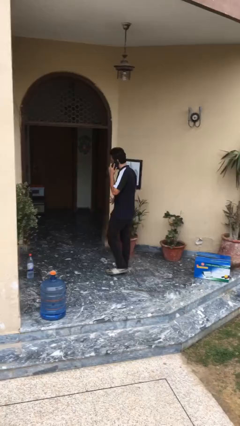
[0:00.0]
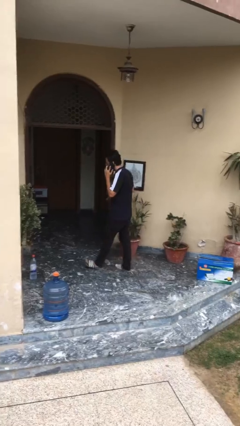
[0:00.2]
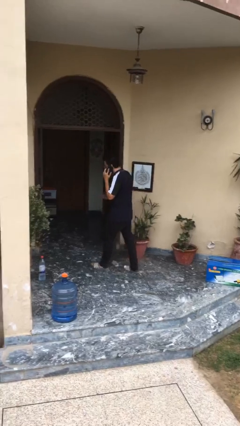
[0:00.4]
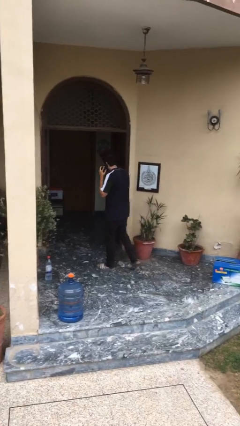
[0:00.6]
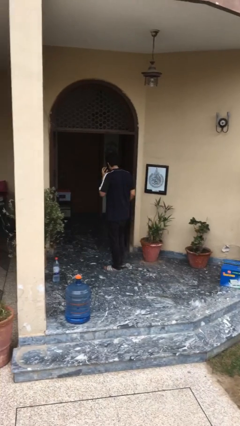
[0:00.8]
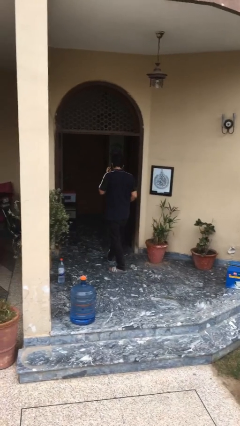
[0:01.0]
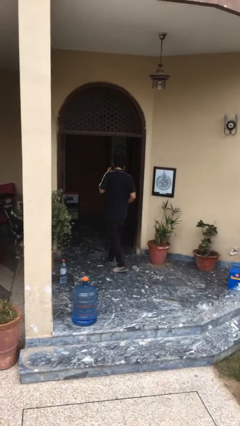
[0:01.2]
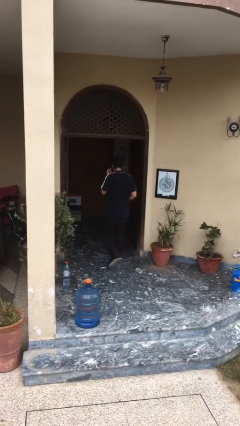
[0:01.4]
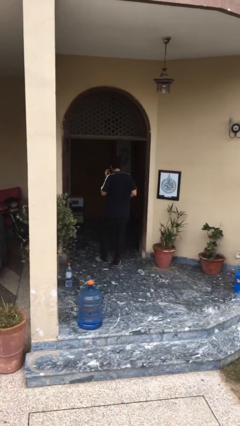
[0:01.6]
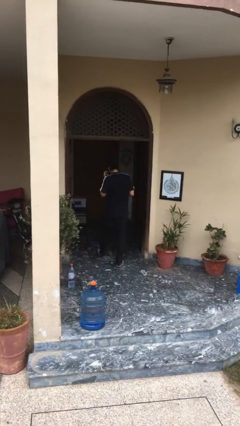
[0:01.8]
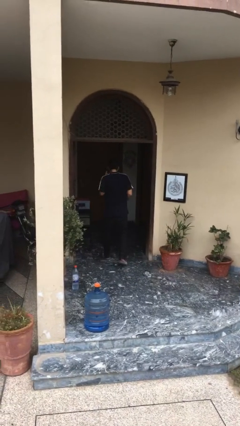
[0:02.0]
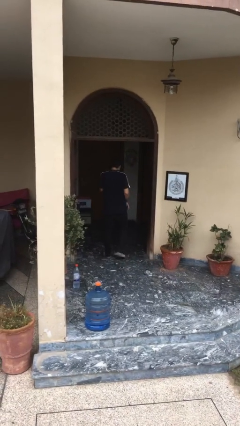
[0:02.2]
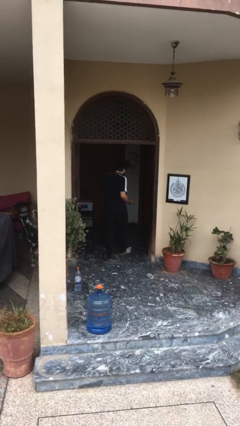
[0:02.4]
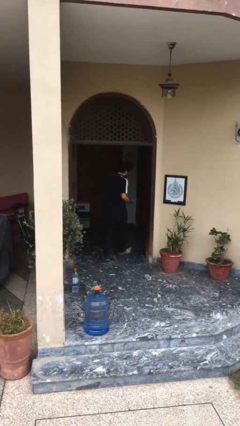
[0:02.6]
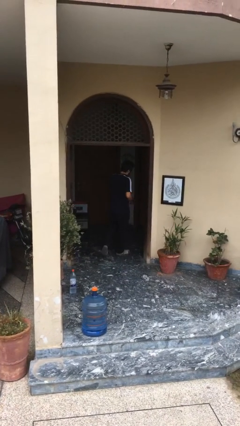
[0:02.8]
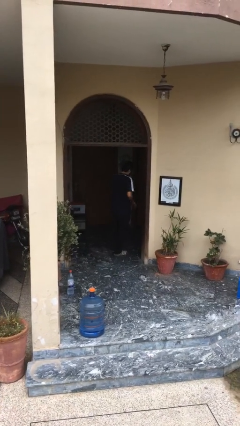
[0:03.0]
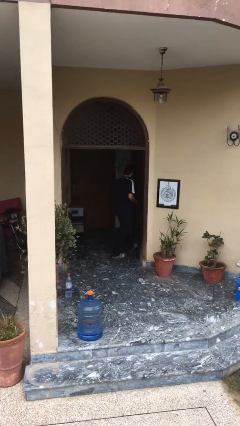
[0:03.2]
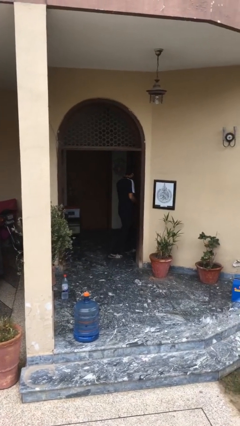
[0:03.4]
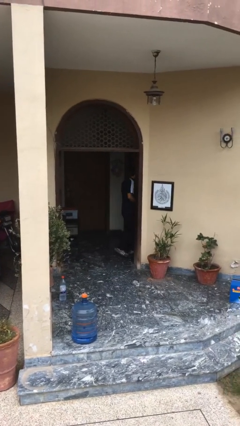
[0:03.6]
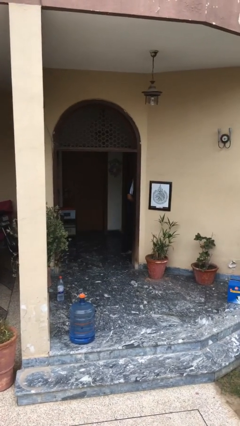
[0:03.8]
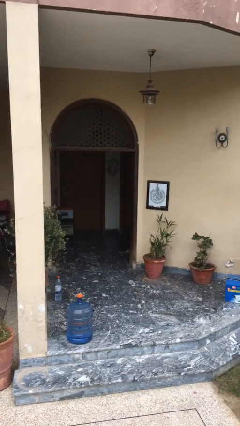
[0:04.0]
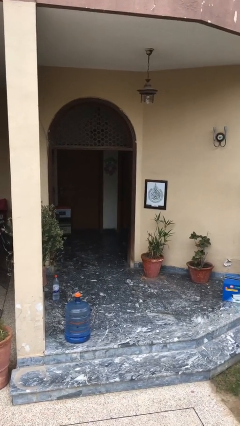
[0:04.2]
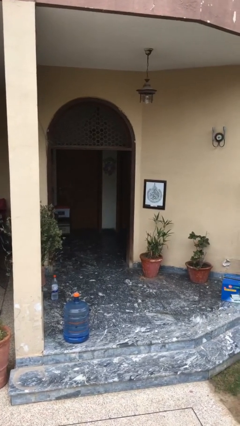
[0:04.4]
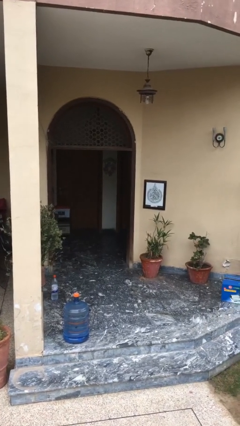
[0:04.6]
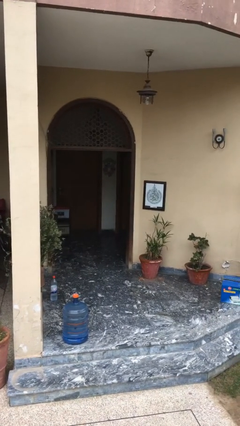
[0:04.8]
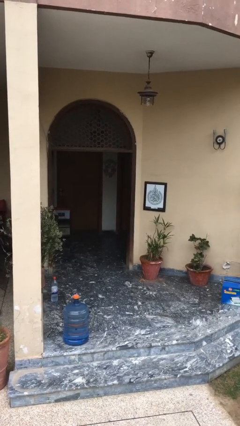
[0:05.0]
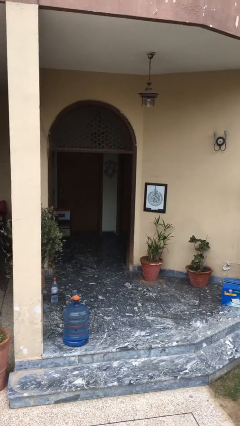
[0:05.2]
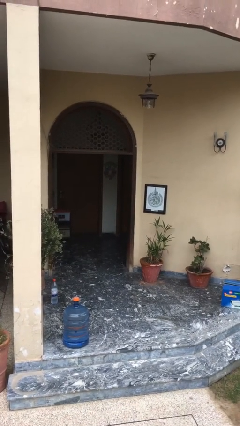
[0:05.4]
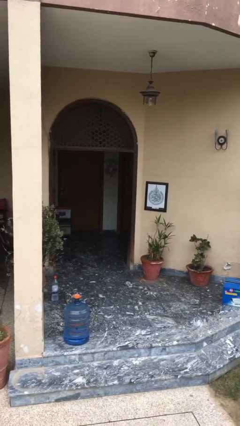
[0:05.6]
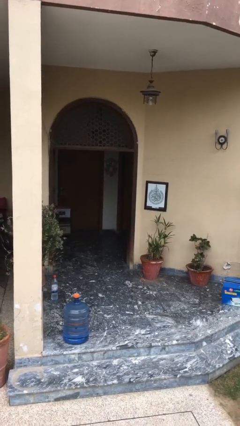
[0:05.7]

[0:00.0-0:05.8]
person exits scene through structure

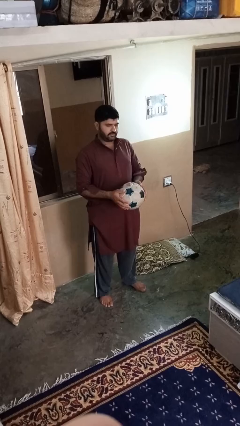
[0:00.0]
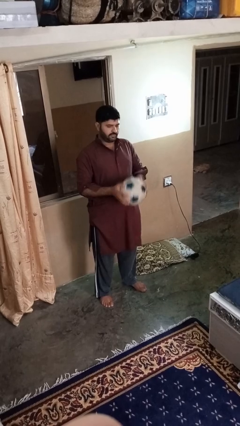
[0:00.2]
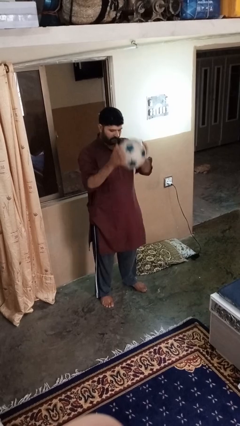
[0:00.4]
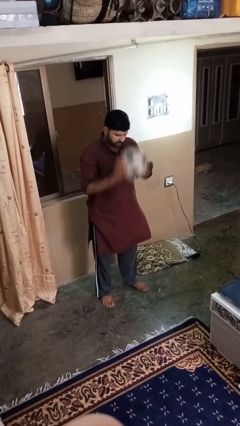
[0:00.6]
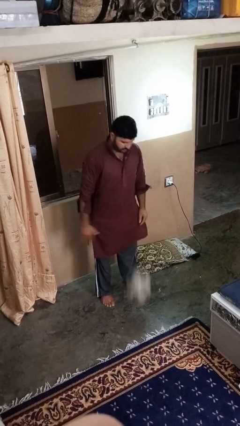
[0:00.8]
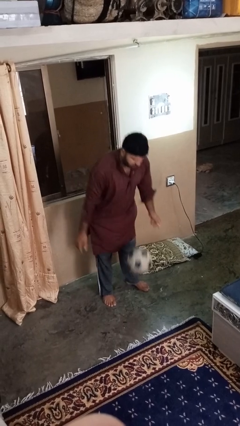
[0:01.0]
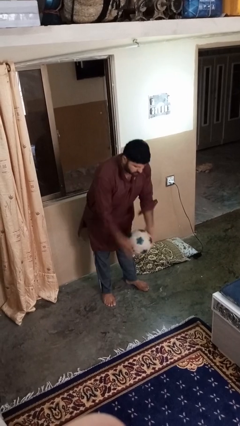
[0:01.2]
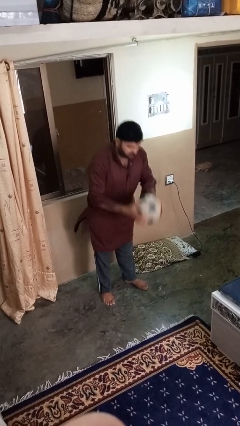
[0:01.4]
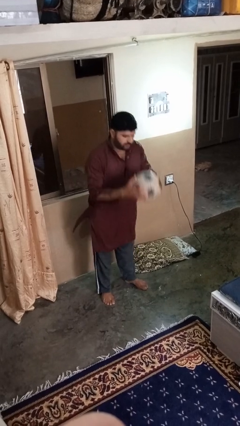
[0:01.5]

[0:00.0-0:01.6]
person bounces ball on floor

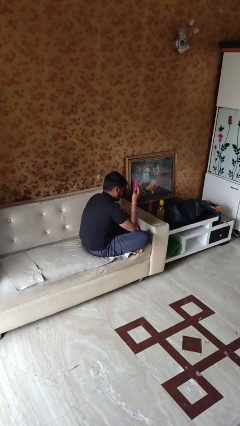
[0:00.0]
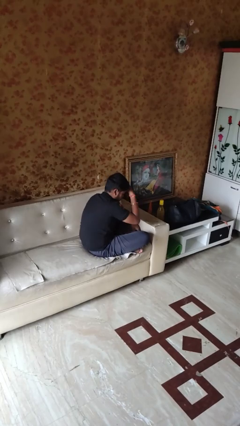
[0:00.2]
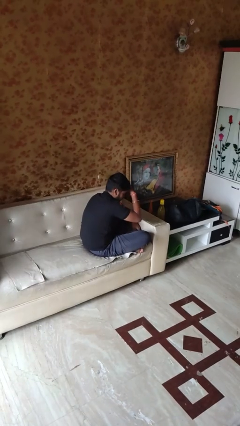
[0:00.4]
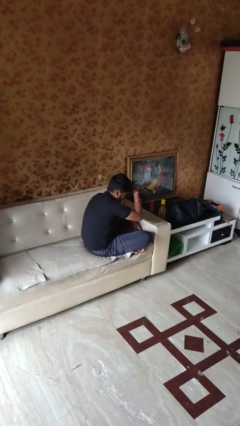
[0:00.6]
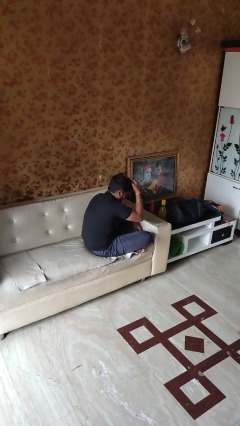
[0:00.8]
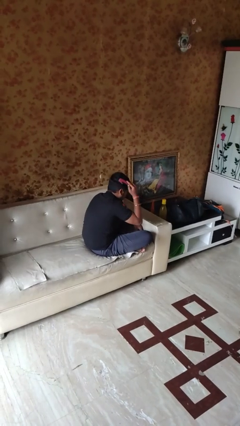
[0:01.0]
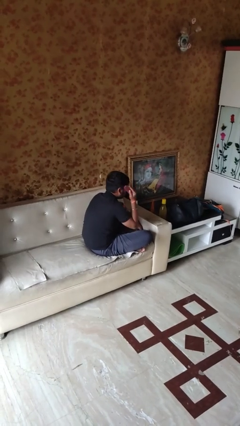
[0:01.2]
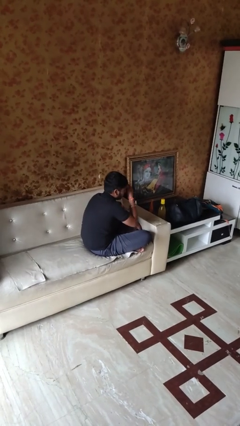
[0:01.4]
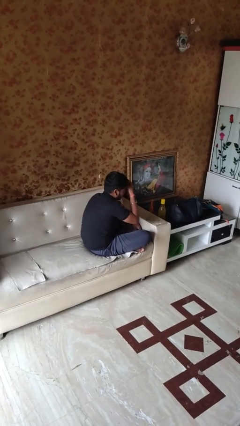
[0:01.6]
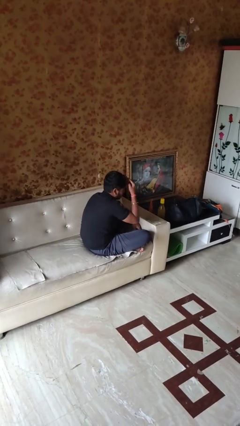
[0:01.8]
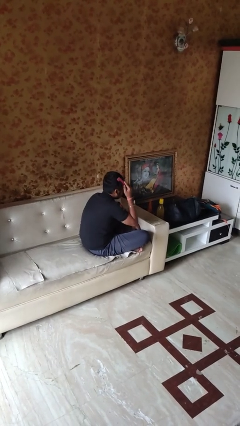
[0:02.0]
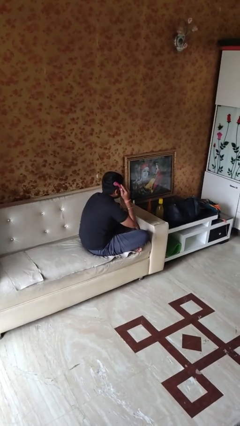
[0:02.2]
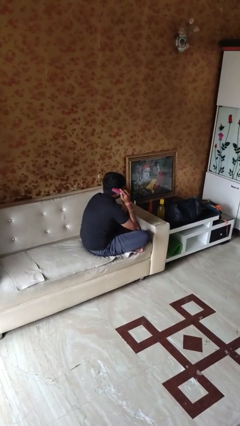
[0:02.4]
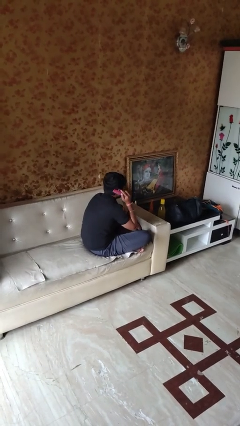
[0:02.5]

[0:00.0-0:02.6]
person brushes hair

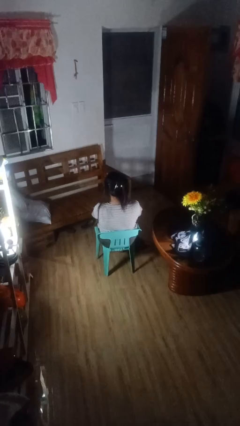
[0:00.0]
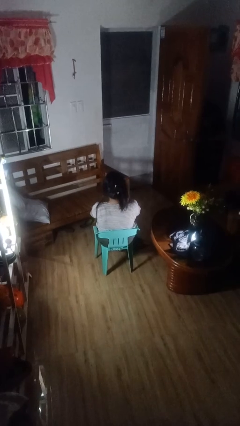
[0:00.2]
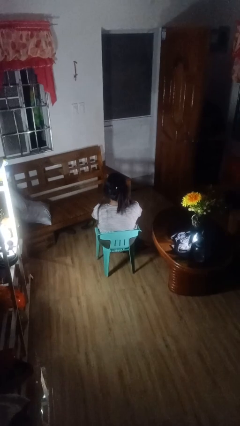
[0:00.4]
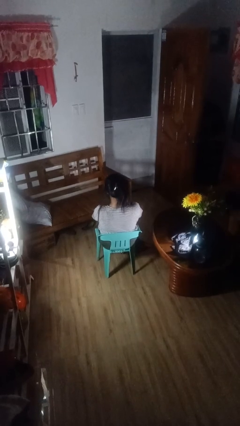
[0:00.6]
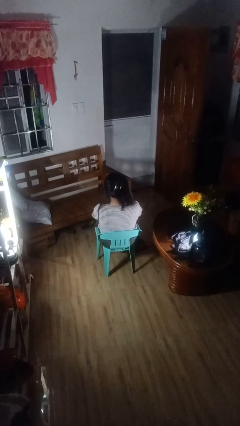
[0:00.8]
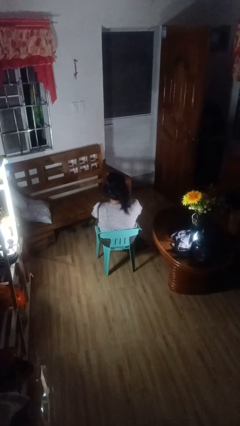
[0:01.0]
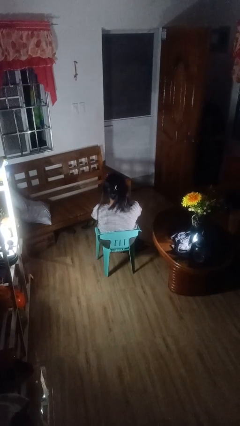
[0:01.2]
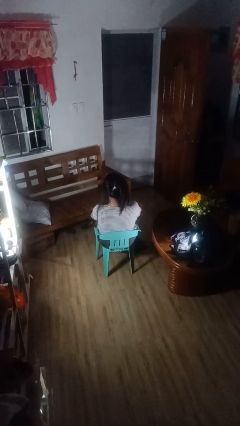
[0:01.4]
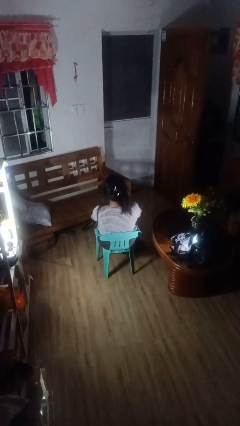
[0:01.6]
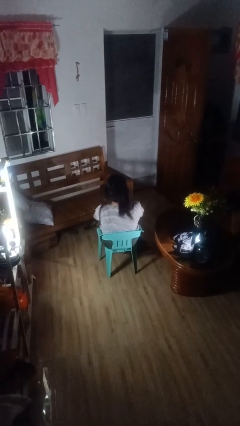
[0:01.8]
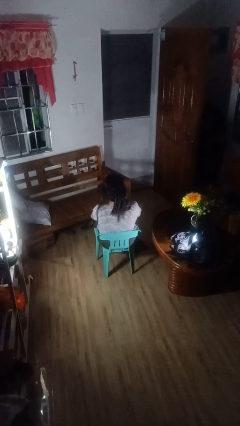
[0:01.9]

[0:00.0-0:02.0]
person nods head

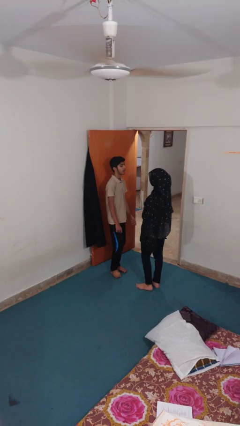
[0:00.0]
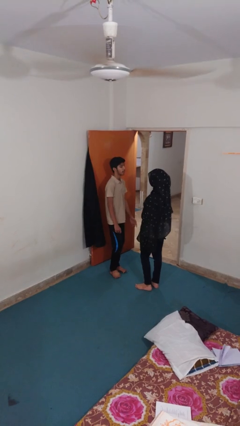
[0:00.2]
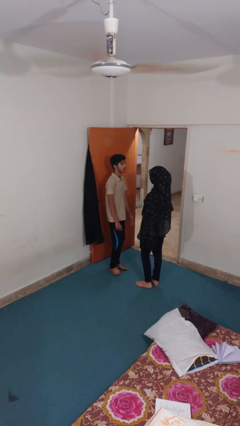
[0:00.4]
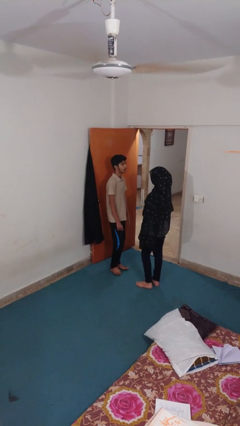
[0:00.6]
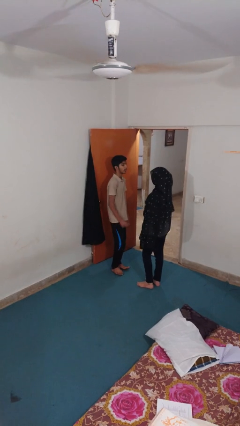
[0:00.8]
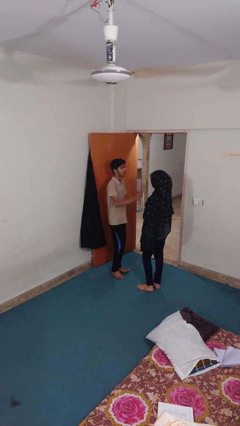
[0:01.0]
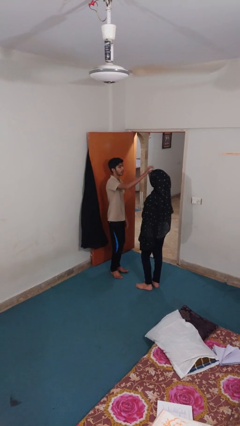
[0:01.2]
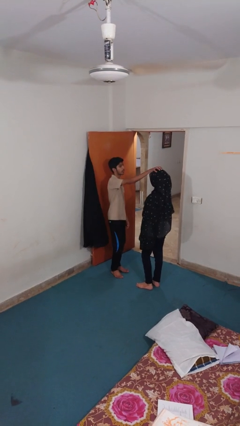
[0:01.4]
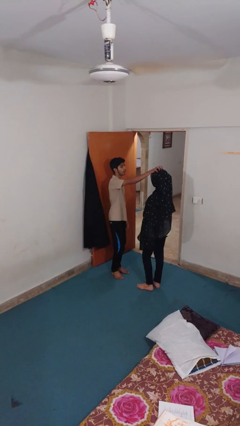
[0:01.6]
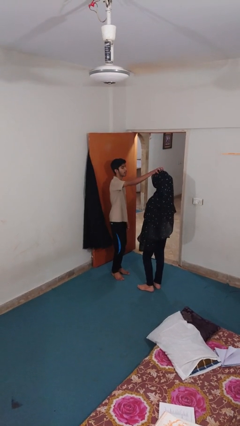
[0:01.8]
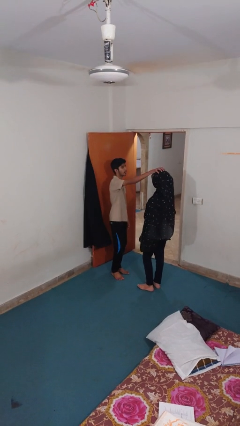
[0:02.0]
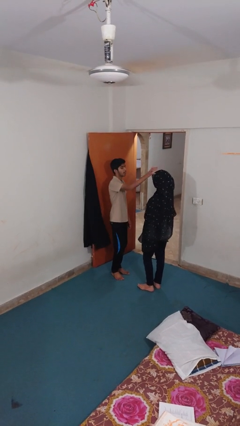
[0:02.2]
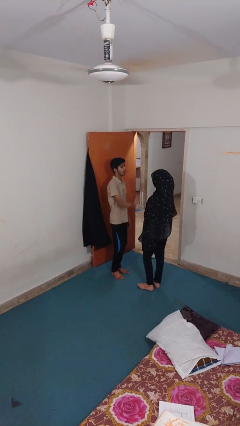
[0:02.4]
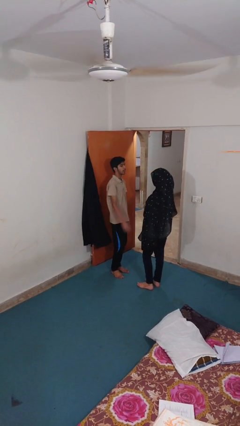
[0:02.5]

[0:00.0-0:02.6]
person grabs person by hair

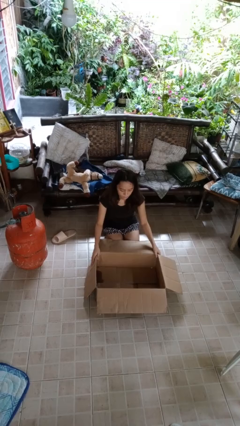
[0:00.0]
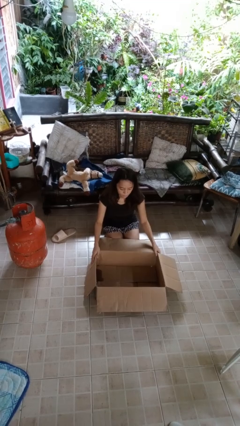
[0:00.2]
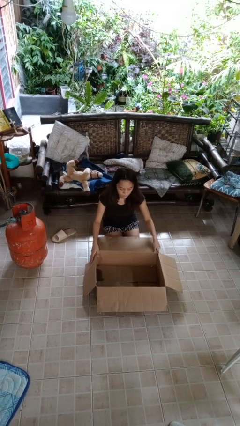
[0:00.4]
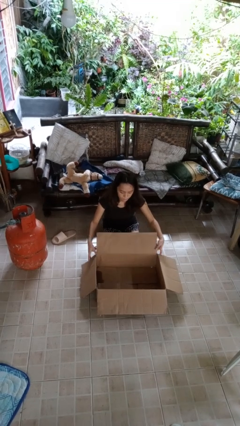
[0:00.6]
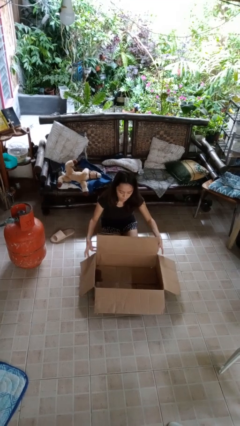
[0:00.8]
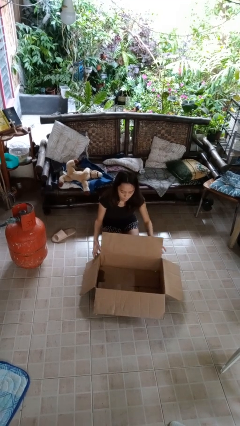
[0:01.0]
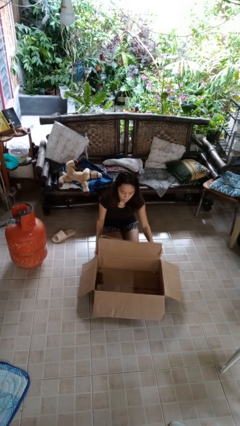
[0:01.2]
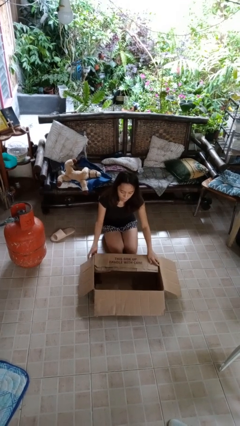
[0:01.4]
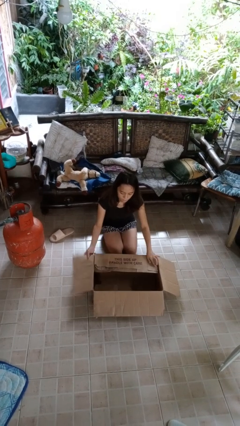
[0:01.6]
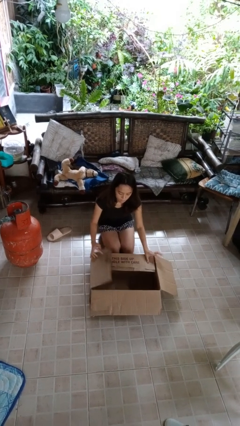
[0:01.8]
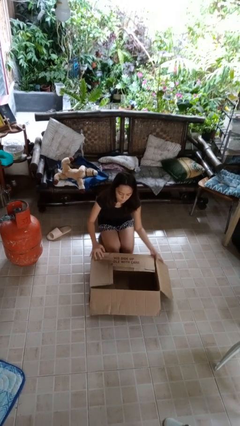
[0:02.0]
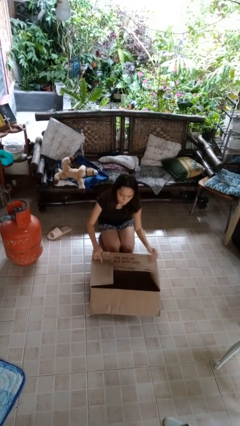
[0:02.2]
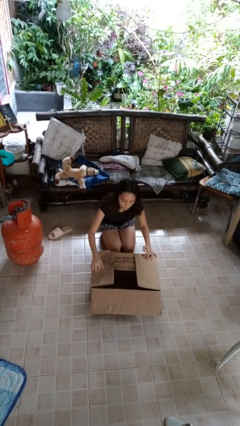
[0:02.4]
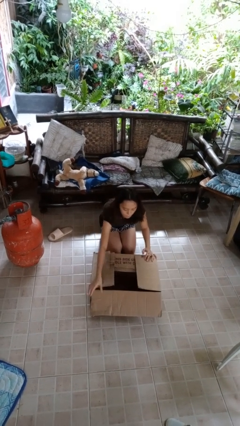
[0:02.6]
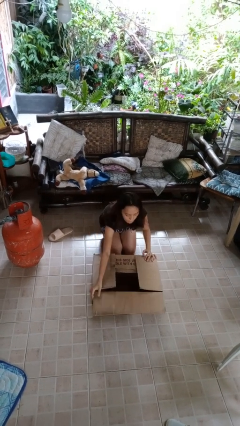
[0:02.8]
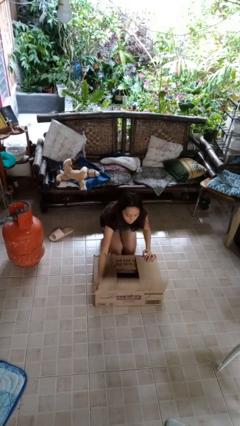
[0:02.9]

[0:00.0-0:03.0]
person closes box
